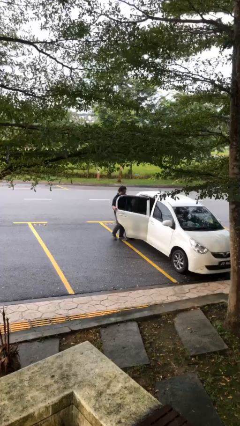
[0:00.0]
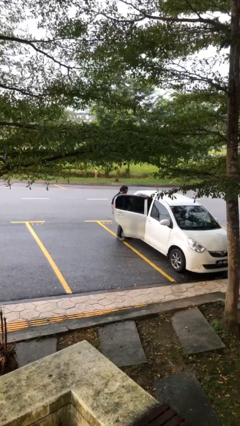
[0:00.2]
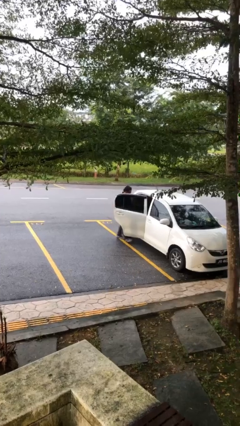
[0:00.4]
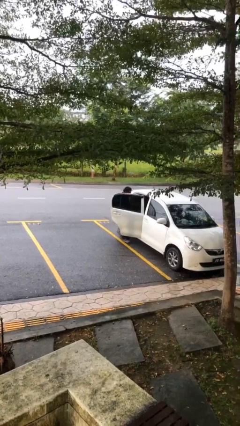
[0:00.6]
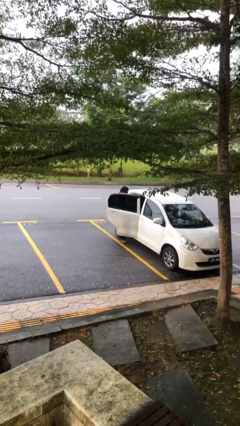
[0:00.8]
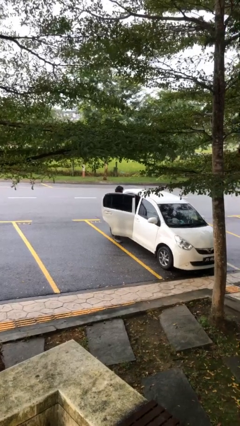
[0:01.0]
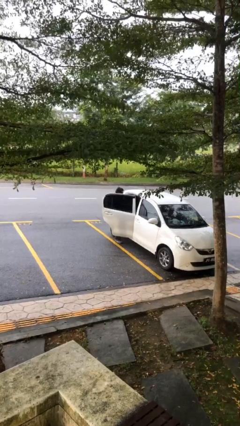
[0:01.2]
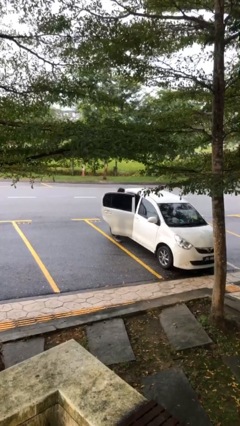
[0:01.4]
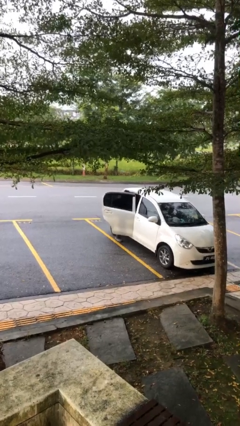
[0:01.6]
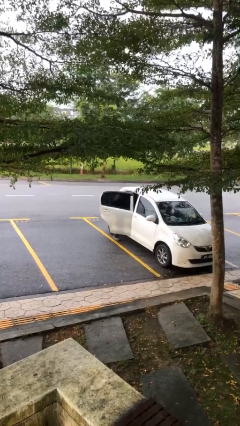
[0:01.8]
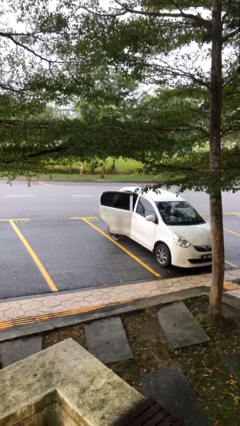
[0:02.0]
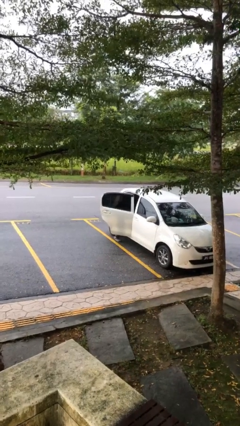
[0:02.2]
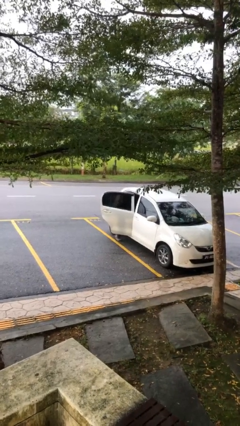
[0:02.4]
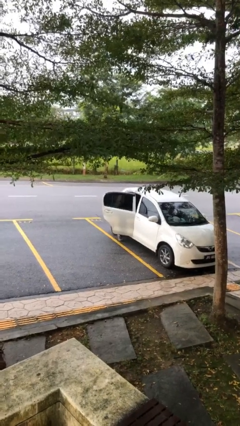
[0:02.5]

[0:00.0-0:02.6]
person enters car

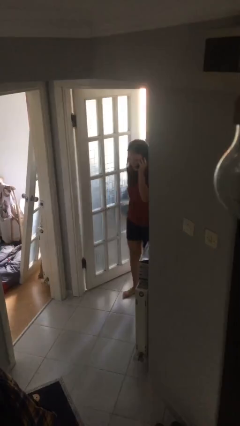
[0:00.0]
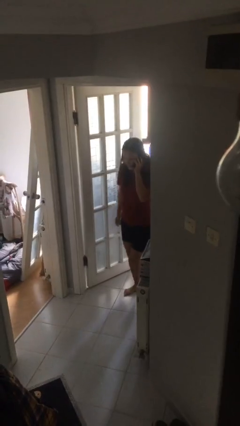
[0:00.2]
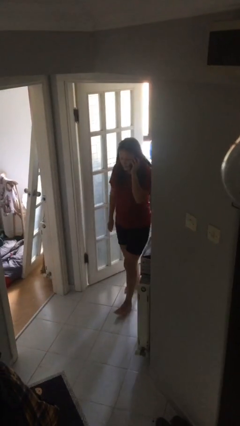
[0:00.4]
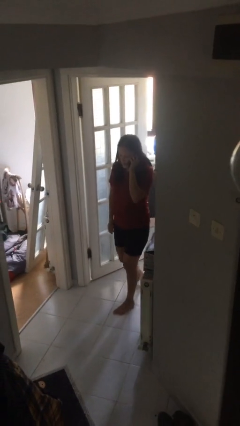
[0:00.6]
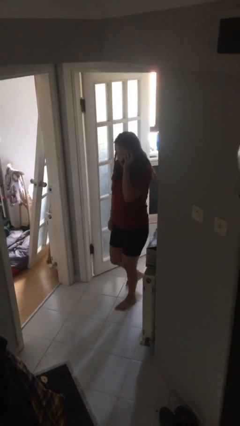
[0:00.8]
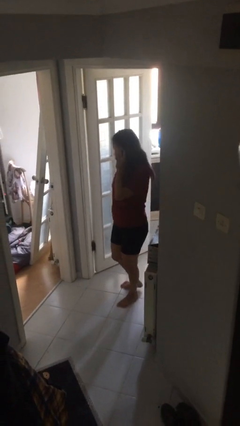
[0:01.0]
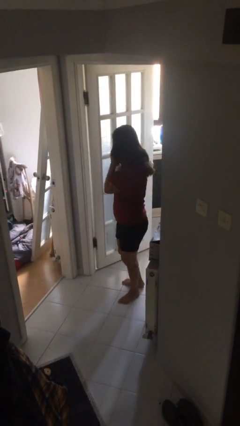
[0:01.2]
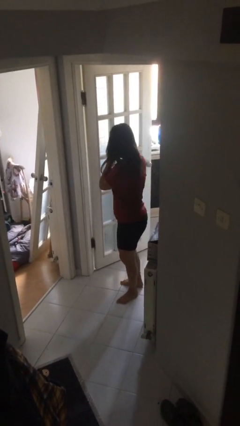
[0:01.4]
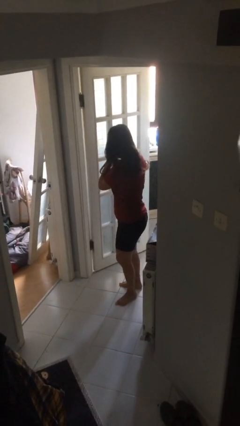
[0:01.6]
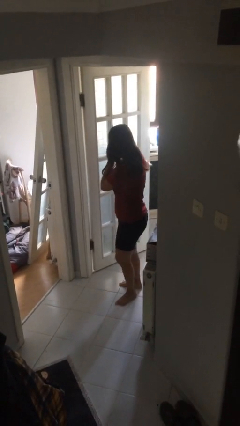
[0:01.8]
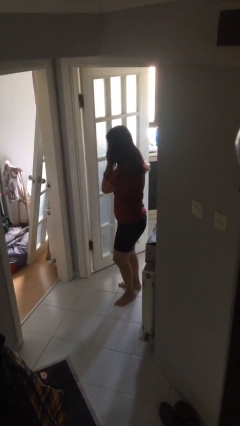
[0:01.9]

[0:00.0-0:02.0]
person enters scene through structure

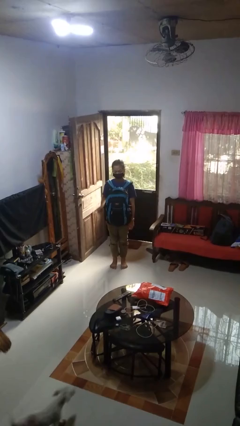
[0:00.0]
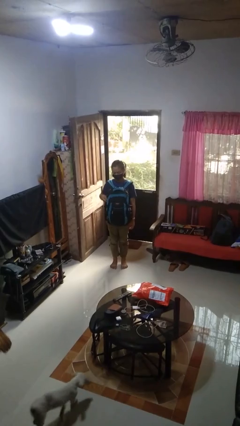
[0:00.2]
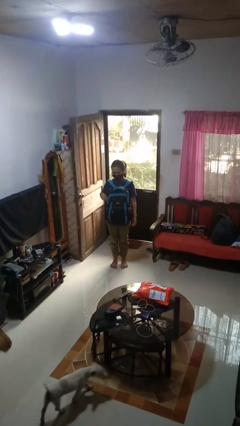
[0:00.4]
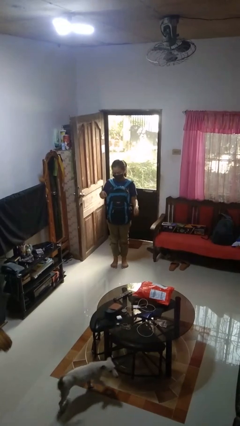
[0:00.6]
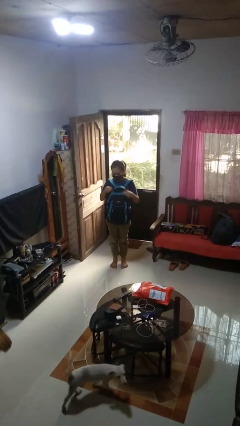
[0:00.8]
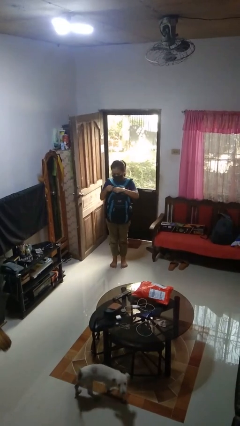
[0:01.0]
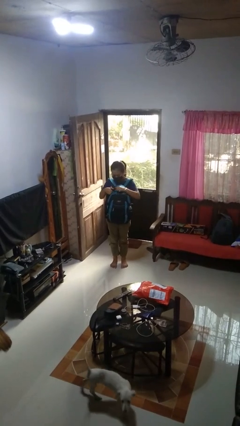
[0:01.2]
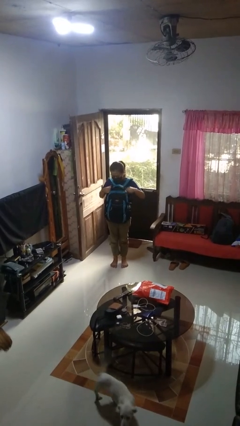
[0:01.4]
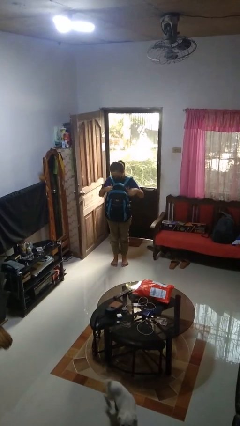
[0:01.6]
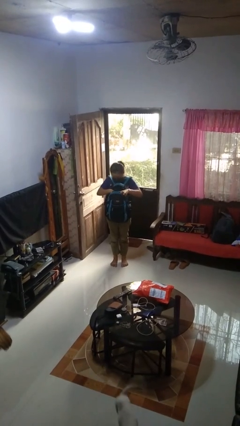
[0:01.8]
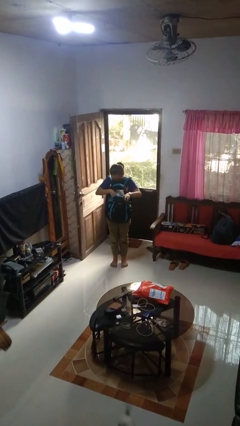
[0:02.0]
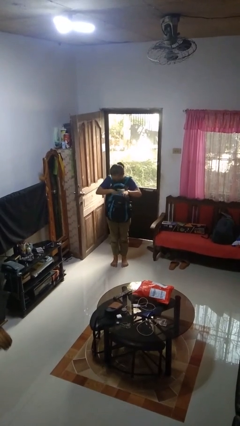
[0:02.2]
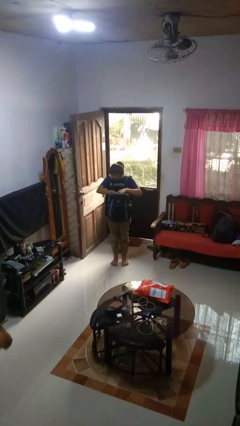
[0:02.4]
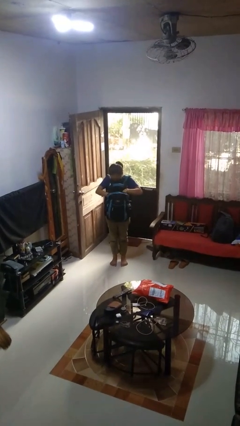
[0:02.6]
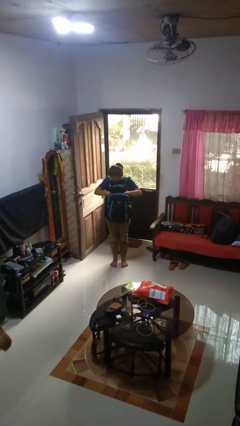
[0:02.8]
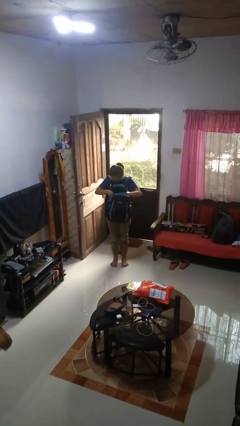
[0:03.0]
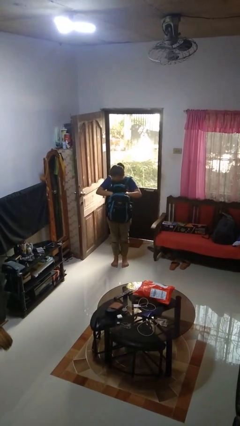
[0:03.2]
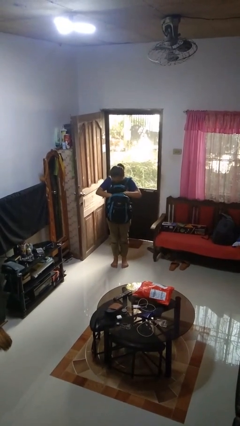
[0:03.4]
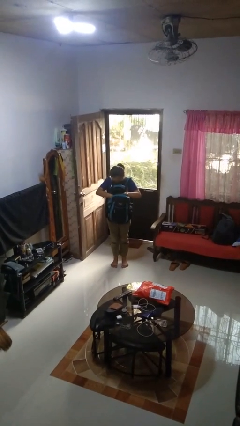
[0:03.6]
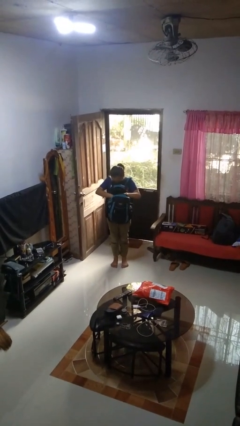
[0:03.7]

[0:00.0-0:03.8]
person searches in backpack

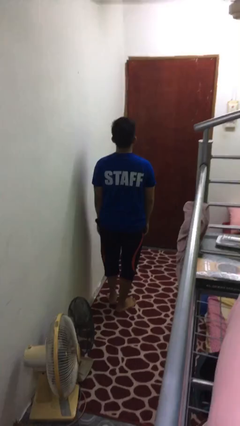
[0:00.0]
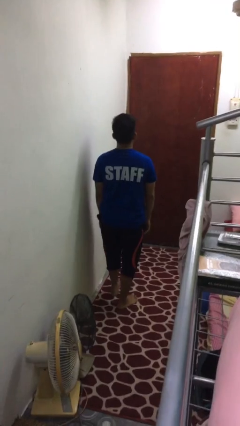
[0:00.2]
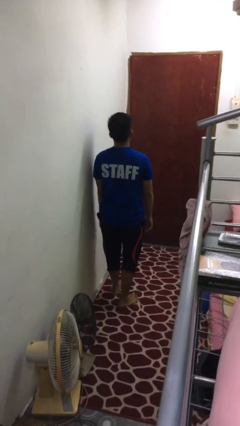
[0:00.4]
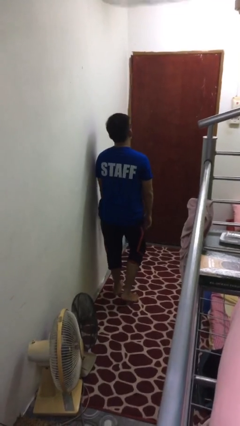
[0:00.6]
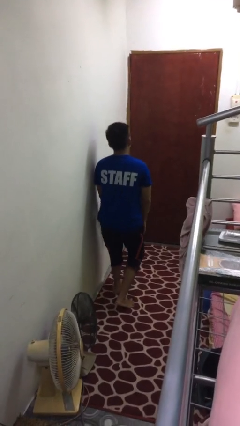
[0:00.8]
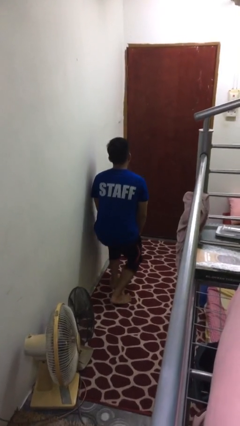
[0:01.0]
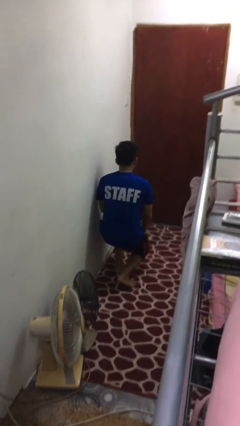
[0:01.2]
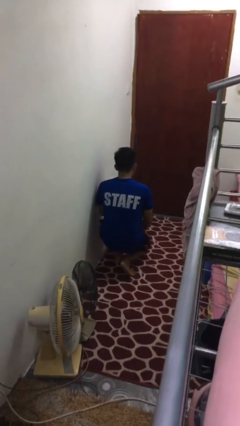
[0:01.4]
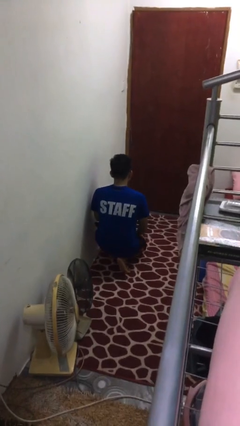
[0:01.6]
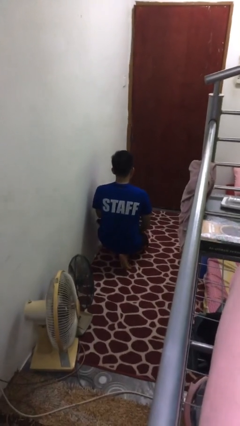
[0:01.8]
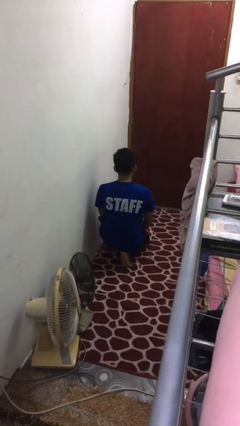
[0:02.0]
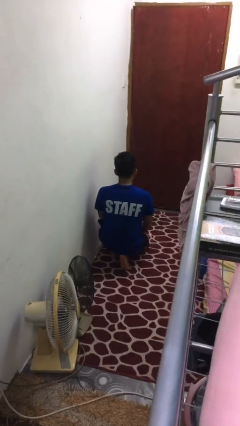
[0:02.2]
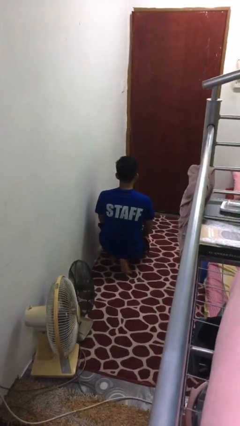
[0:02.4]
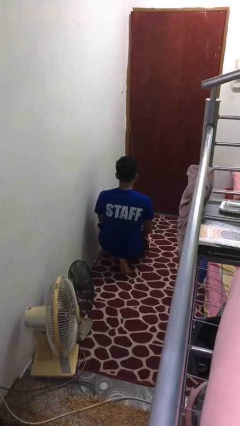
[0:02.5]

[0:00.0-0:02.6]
person kneels

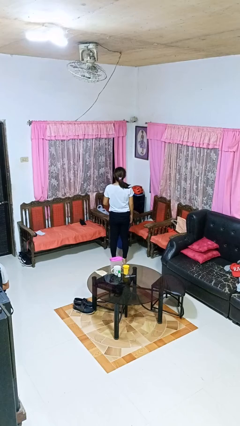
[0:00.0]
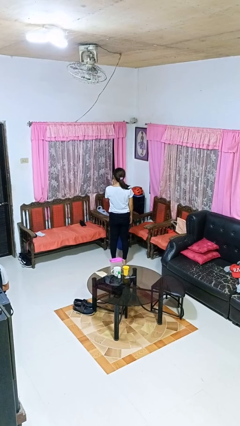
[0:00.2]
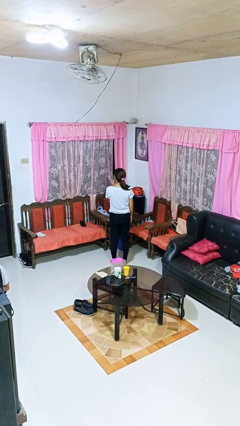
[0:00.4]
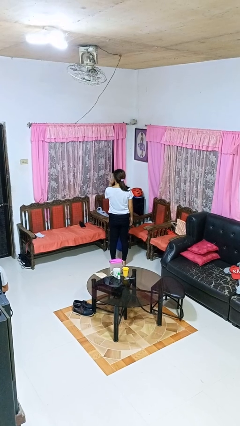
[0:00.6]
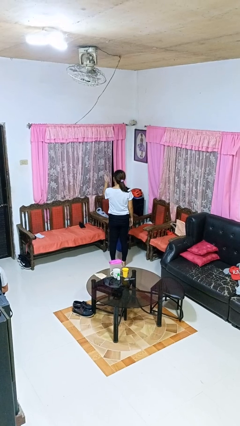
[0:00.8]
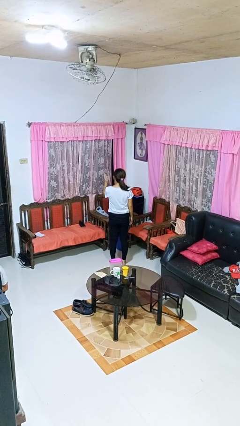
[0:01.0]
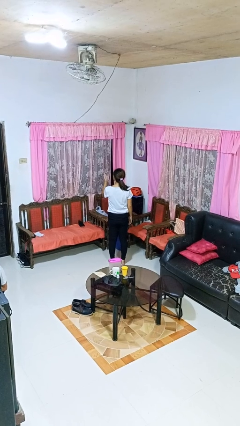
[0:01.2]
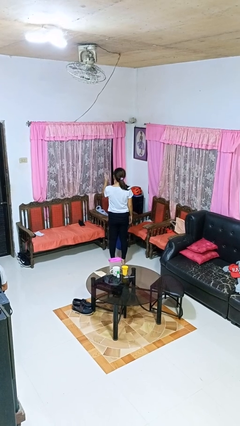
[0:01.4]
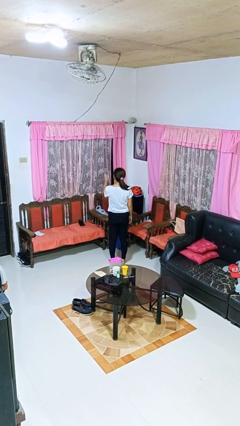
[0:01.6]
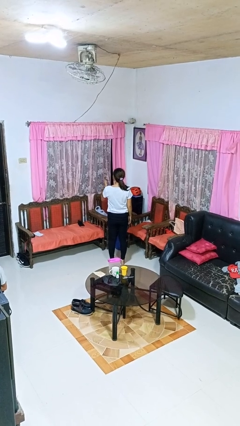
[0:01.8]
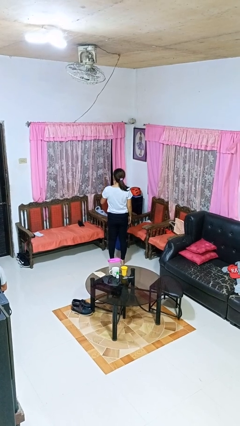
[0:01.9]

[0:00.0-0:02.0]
person gestures blow kiss

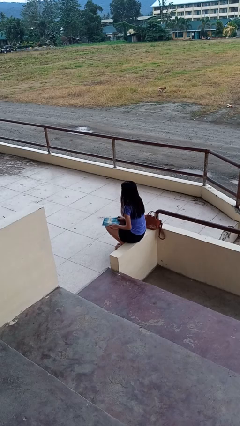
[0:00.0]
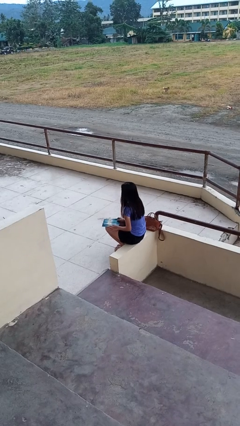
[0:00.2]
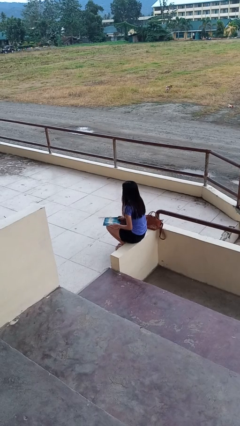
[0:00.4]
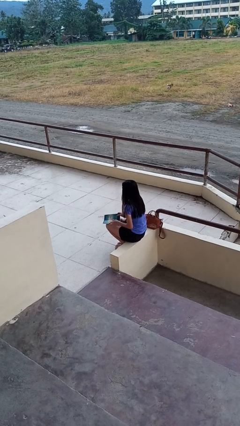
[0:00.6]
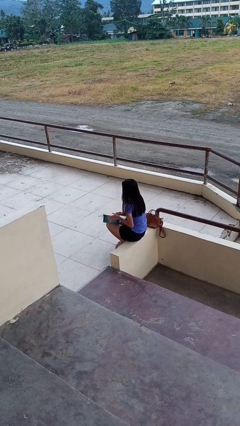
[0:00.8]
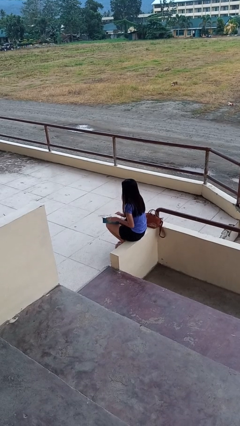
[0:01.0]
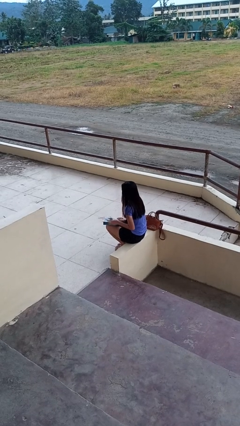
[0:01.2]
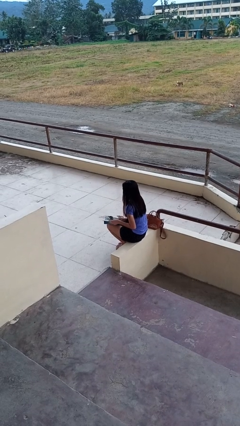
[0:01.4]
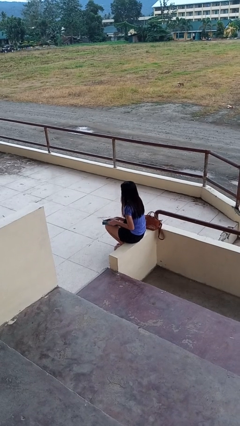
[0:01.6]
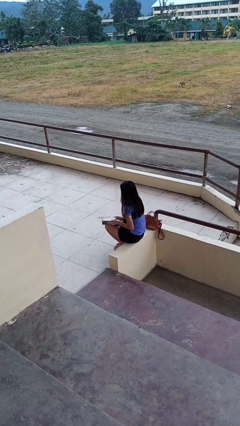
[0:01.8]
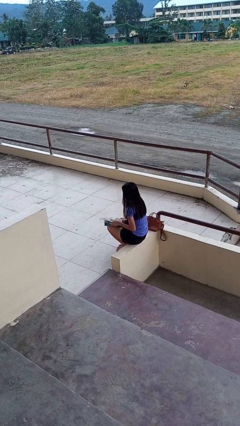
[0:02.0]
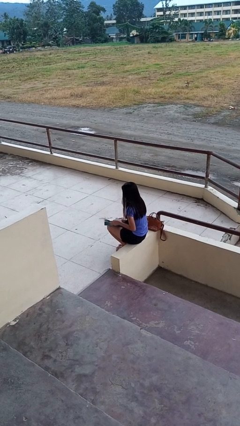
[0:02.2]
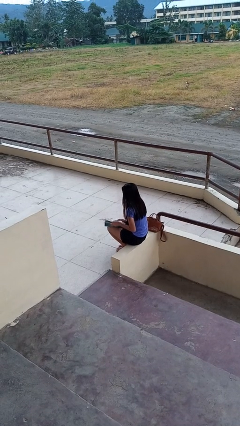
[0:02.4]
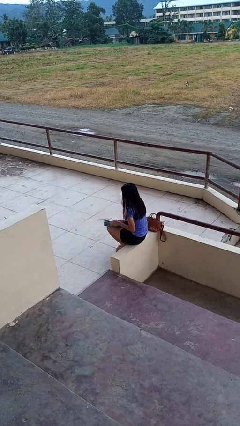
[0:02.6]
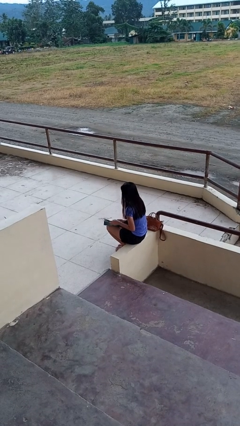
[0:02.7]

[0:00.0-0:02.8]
person reads magazine

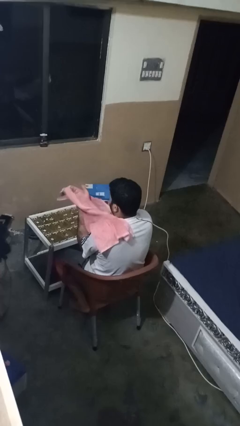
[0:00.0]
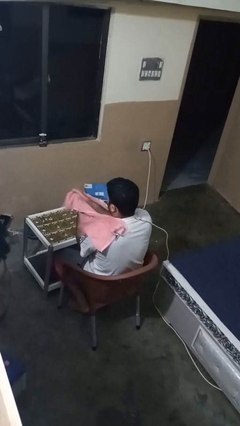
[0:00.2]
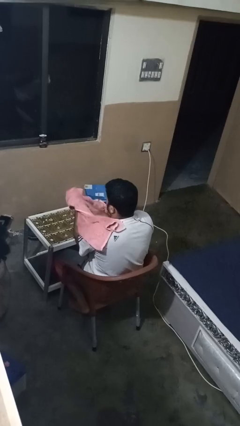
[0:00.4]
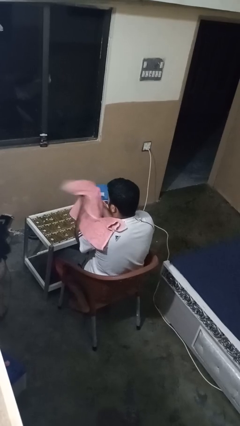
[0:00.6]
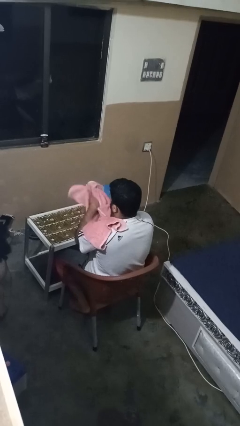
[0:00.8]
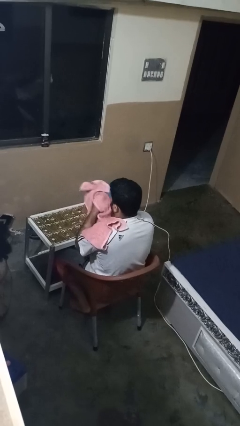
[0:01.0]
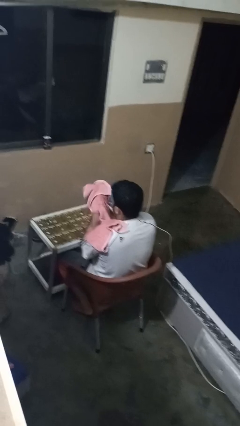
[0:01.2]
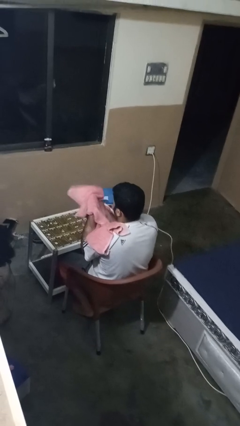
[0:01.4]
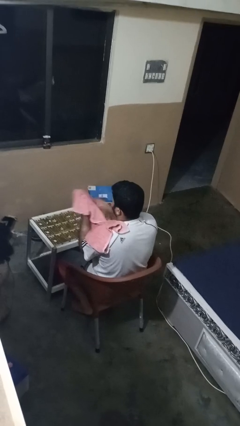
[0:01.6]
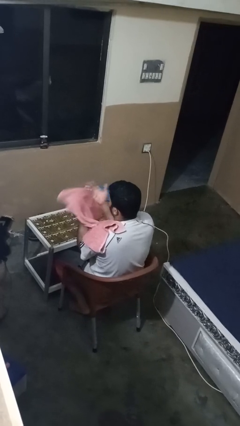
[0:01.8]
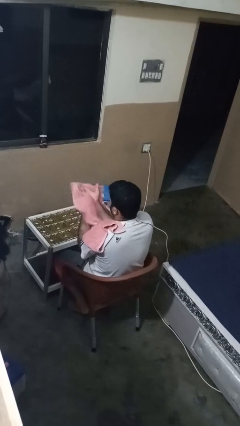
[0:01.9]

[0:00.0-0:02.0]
person dries hands with towel
